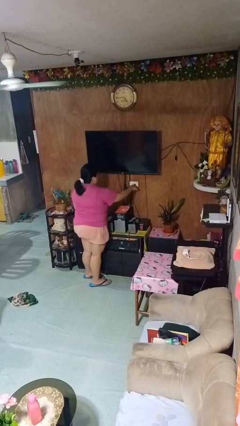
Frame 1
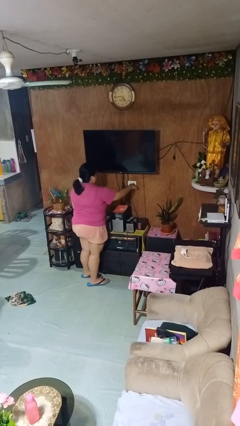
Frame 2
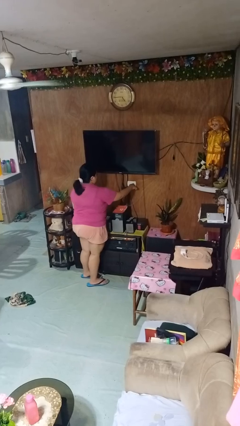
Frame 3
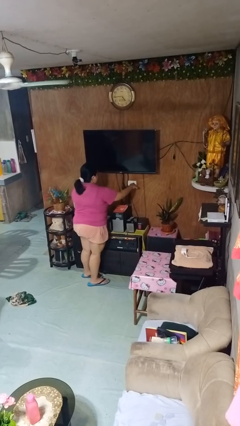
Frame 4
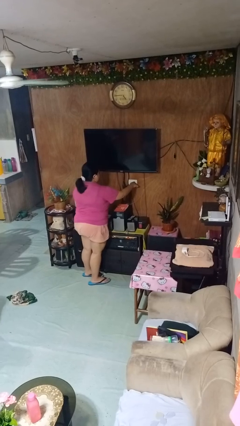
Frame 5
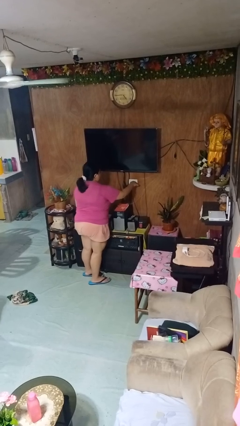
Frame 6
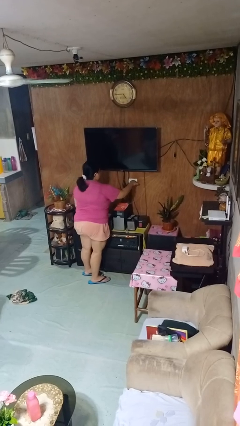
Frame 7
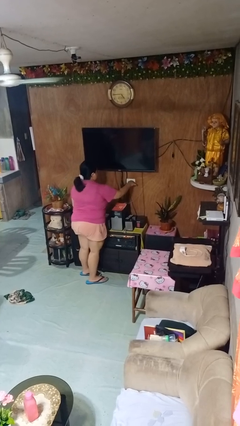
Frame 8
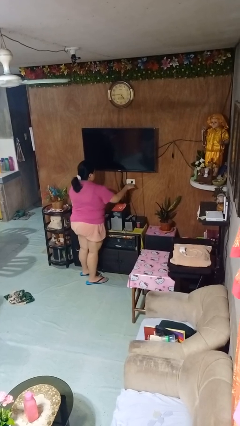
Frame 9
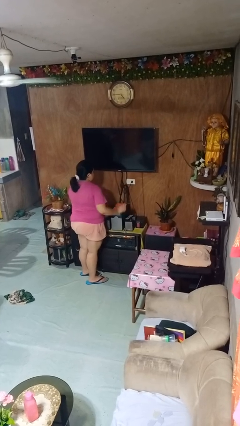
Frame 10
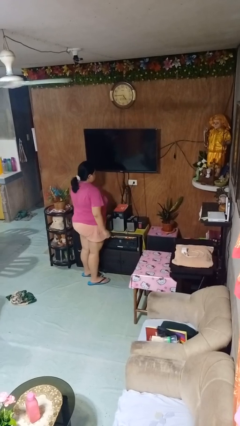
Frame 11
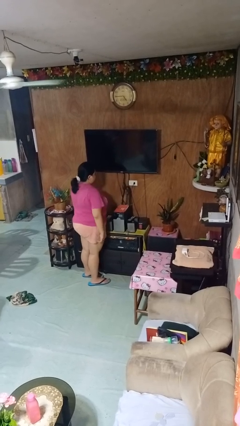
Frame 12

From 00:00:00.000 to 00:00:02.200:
person plugs into electrical socket

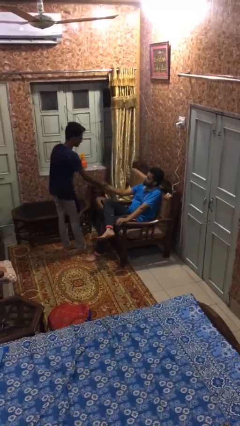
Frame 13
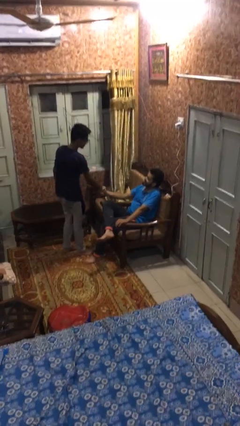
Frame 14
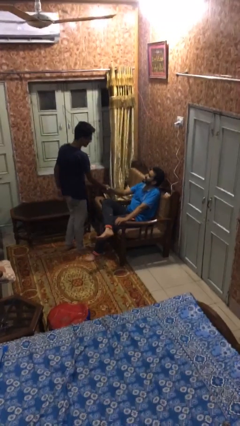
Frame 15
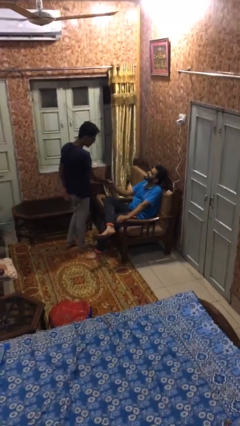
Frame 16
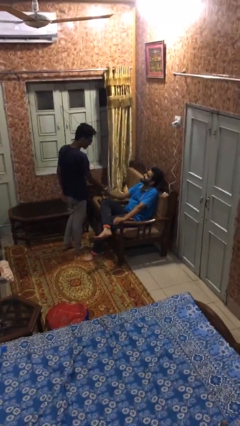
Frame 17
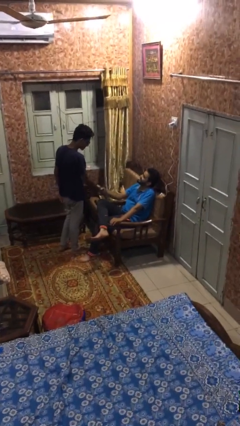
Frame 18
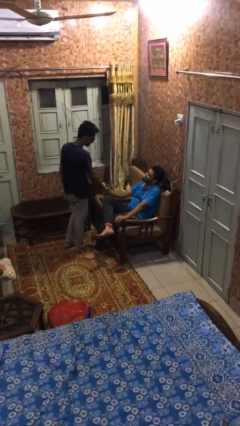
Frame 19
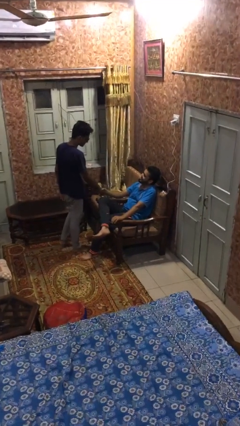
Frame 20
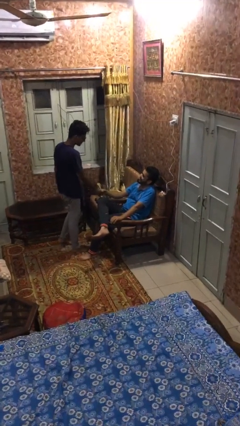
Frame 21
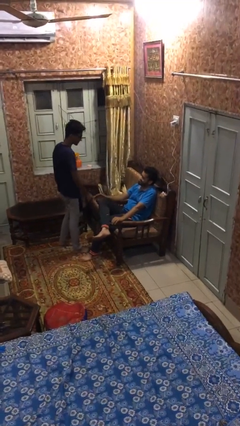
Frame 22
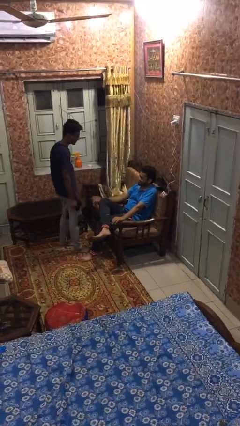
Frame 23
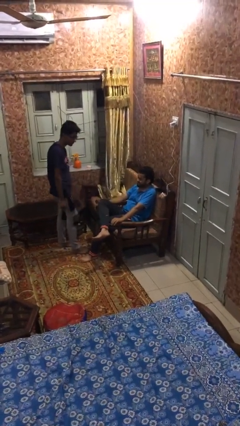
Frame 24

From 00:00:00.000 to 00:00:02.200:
person shakes hand

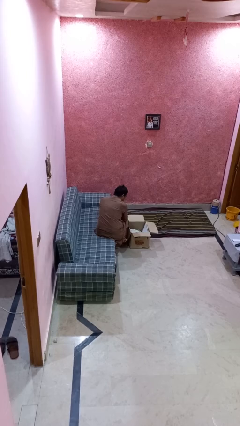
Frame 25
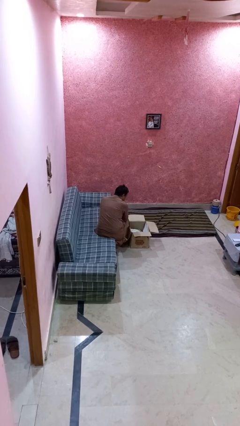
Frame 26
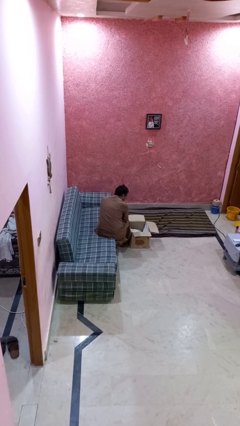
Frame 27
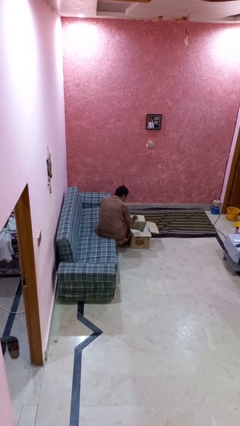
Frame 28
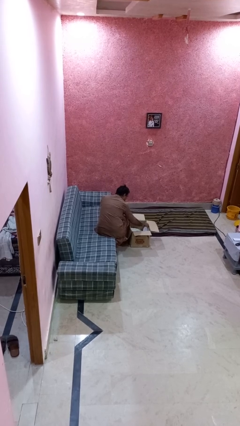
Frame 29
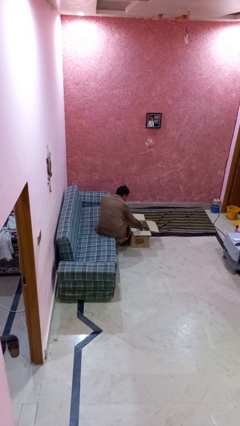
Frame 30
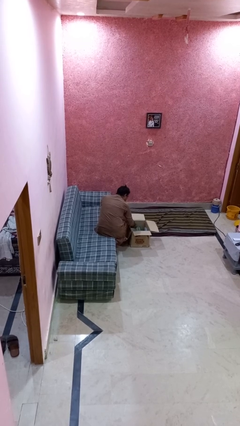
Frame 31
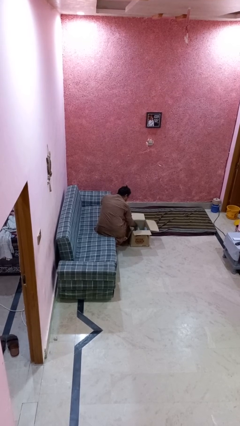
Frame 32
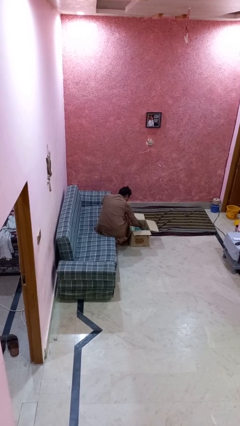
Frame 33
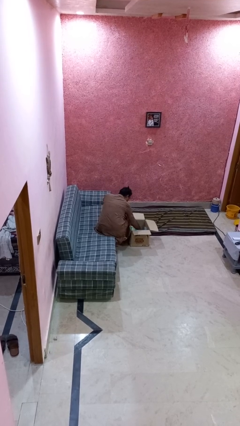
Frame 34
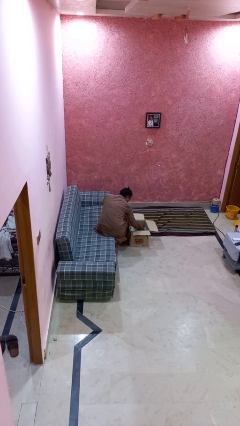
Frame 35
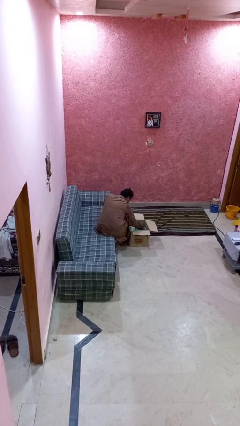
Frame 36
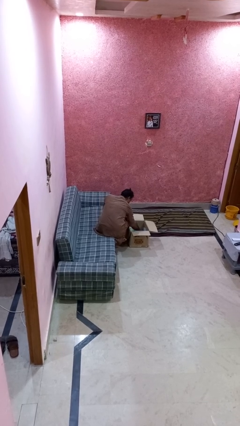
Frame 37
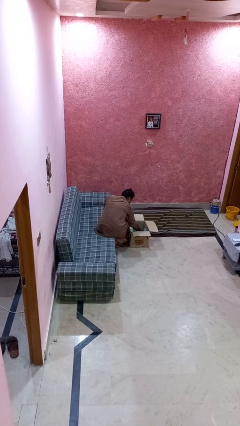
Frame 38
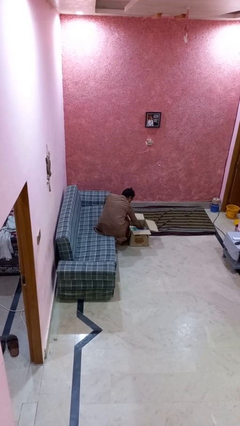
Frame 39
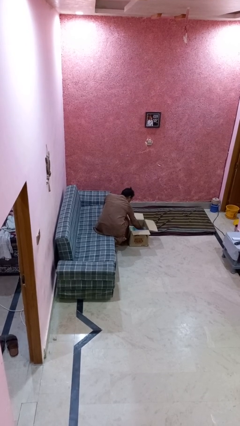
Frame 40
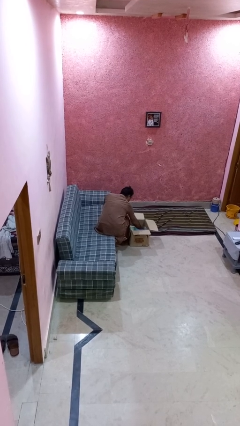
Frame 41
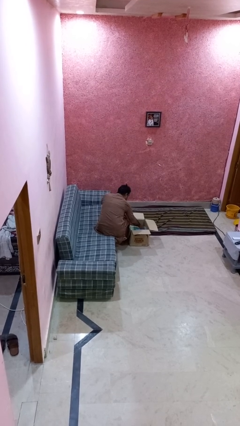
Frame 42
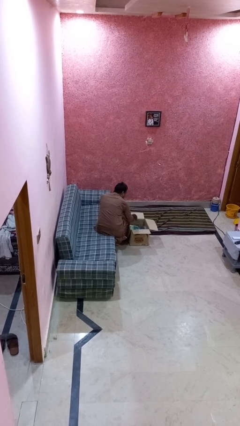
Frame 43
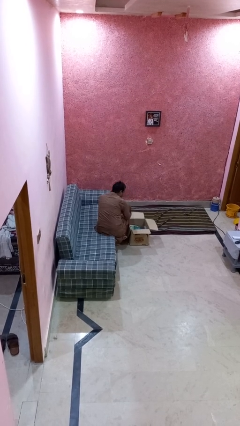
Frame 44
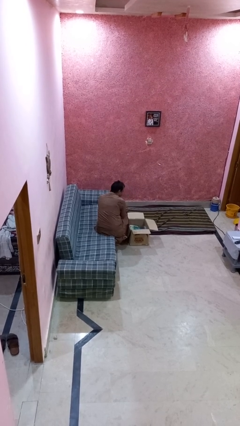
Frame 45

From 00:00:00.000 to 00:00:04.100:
person searches in box

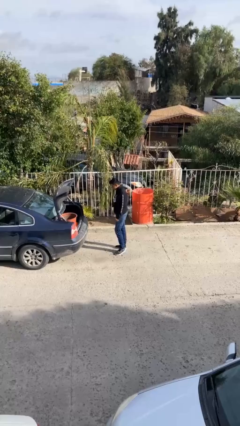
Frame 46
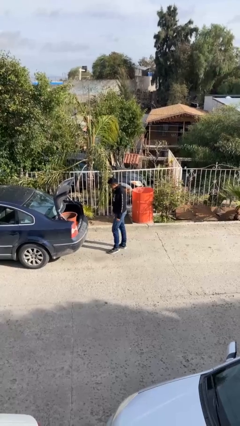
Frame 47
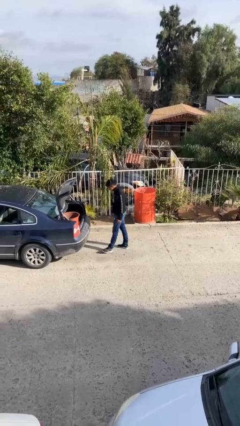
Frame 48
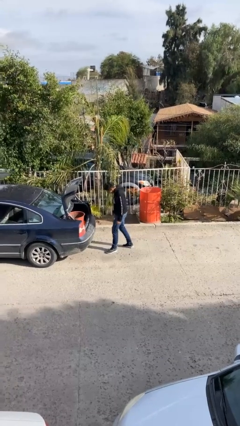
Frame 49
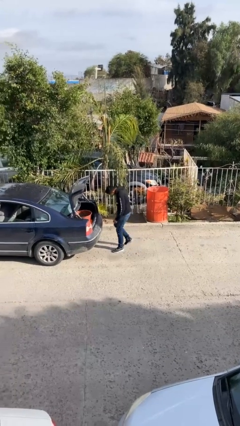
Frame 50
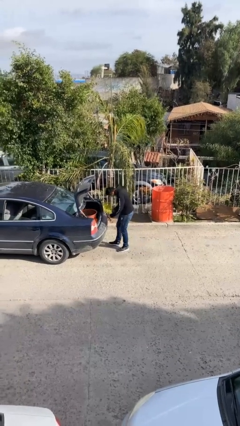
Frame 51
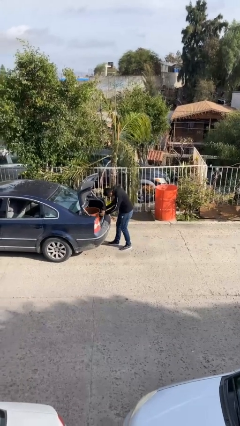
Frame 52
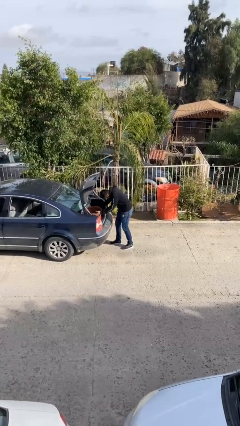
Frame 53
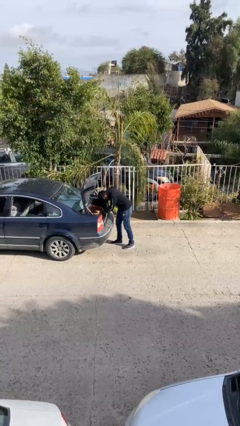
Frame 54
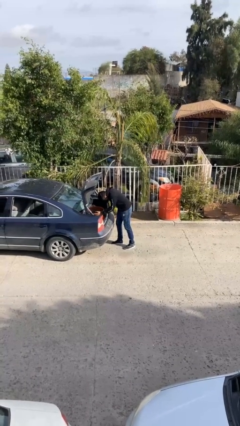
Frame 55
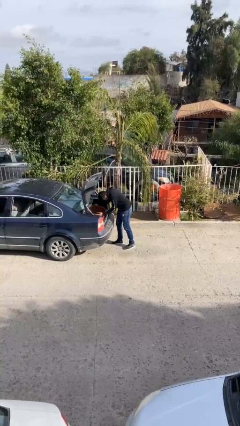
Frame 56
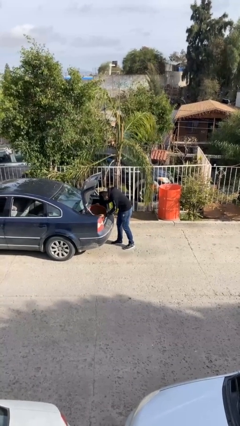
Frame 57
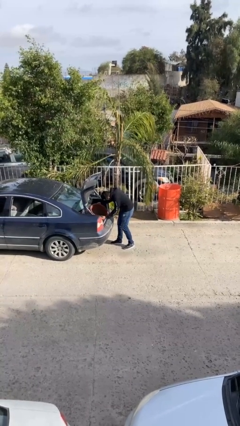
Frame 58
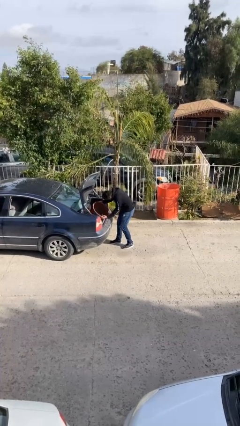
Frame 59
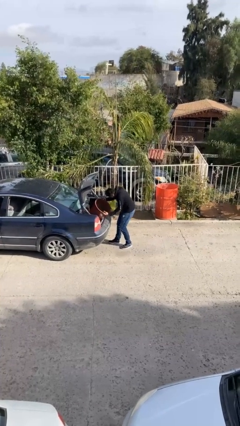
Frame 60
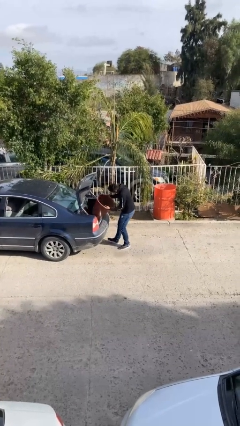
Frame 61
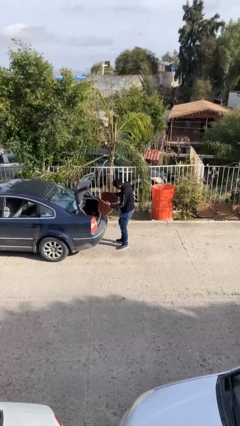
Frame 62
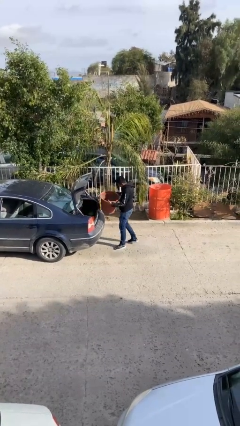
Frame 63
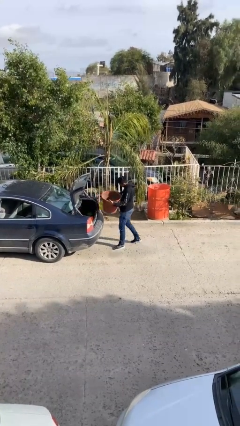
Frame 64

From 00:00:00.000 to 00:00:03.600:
person unloads car

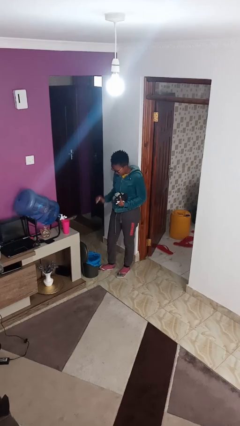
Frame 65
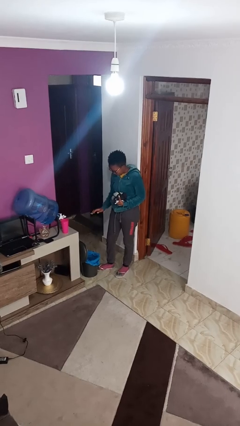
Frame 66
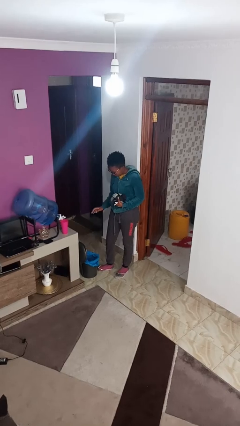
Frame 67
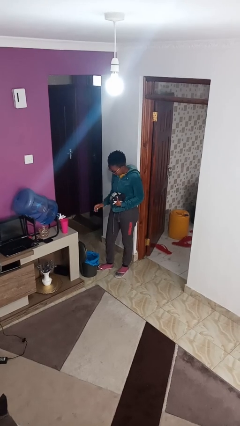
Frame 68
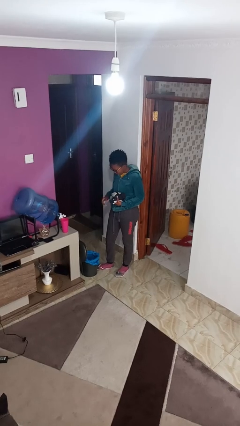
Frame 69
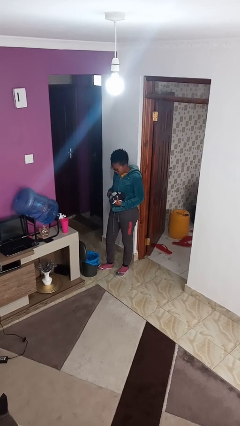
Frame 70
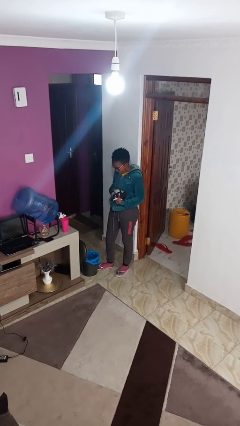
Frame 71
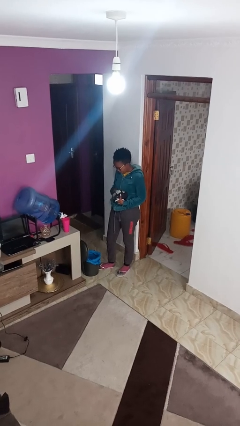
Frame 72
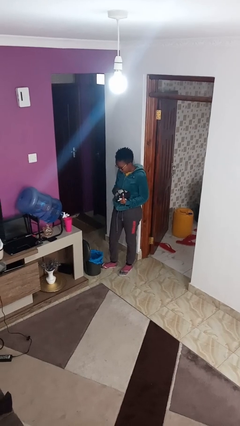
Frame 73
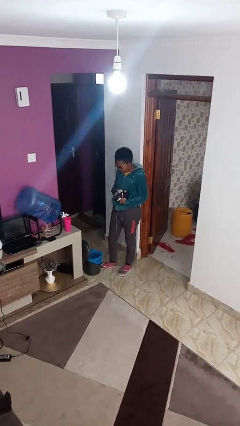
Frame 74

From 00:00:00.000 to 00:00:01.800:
person discards trash

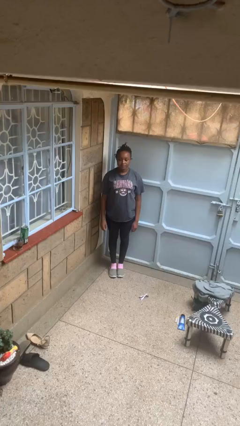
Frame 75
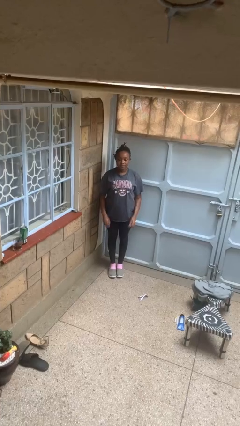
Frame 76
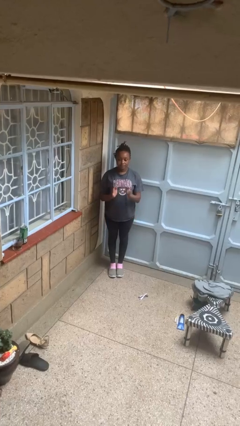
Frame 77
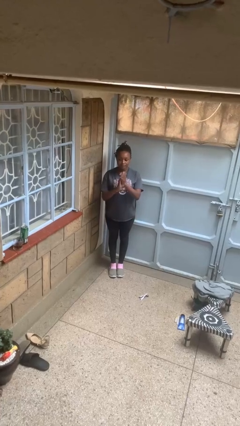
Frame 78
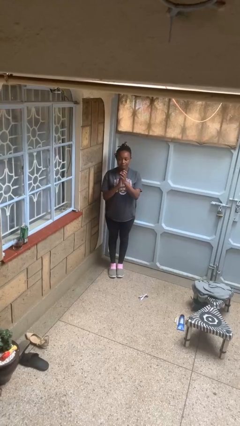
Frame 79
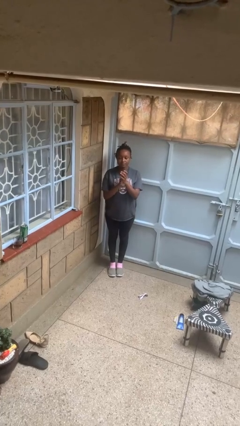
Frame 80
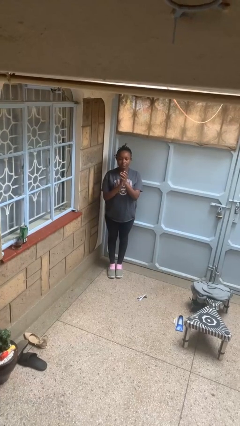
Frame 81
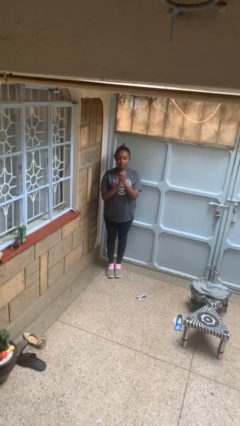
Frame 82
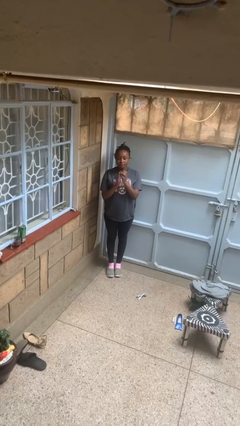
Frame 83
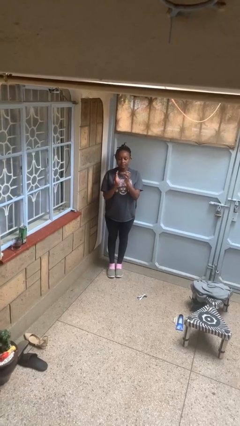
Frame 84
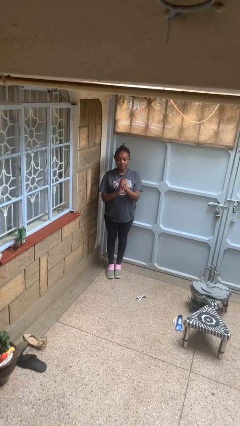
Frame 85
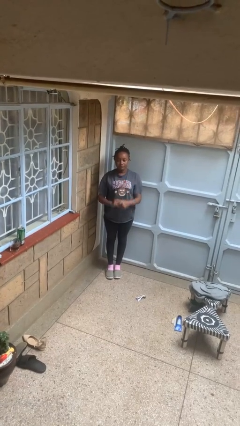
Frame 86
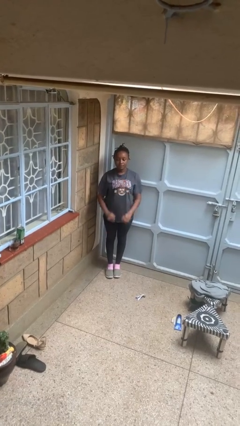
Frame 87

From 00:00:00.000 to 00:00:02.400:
person claps hands

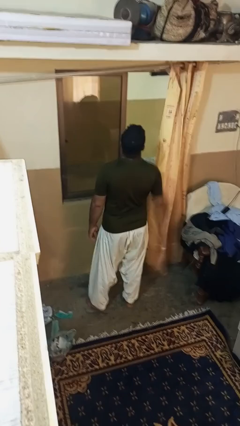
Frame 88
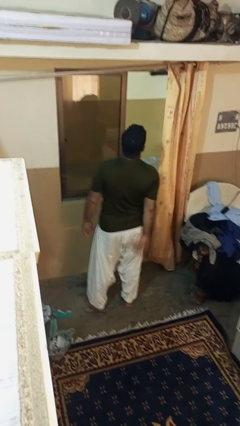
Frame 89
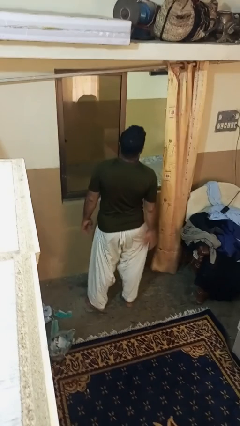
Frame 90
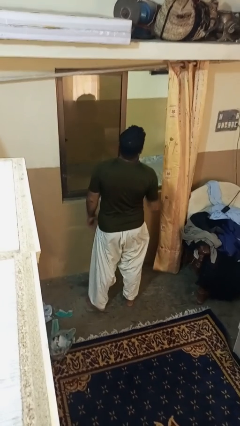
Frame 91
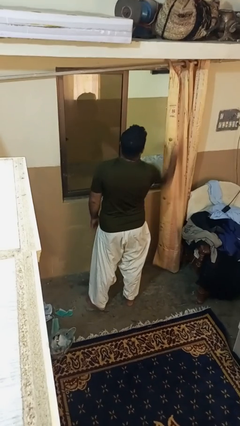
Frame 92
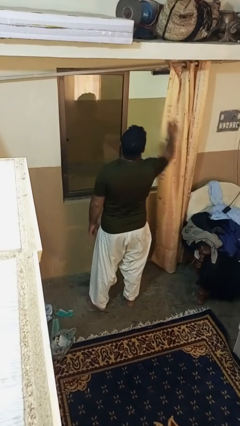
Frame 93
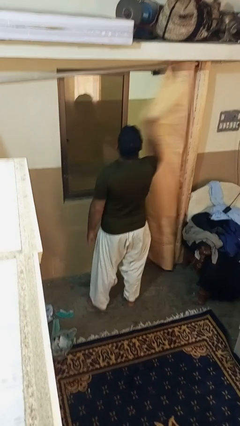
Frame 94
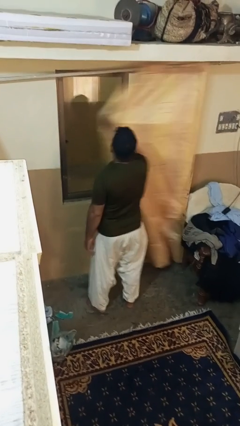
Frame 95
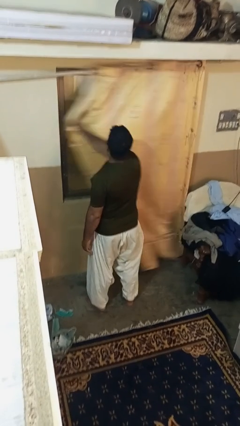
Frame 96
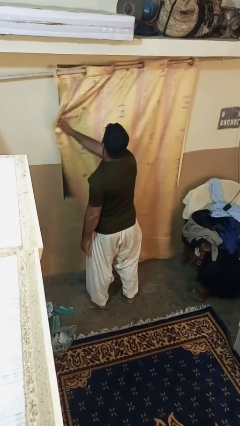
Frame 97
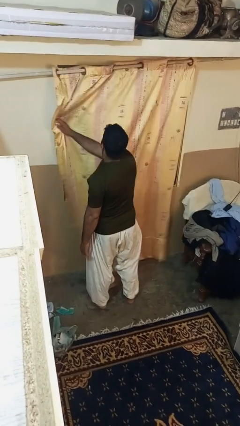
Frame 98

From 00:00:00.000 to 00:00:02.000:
person closes curtains
